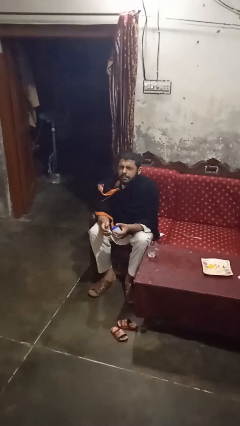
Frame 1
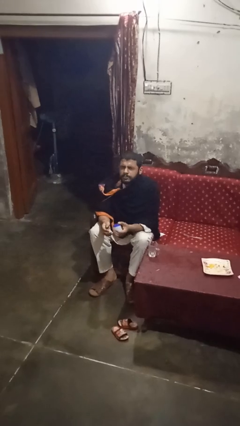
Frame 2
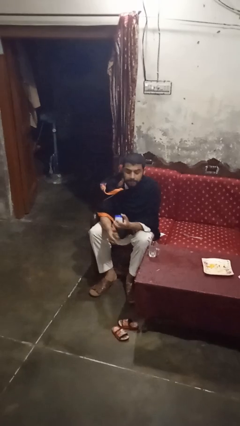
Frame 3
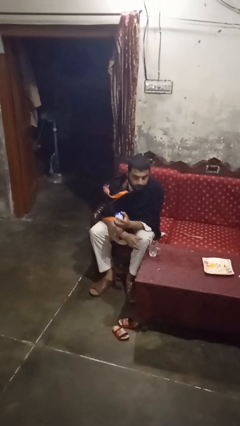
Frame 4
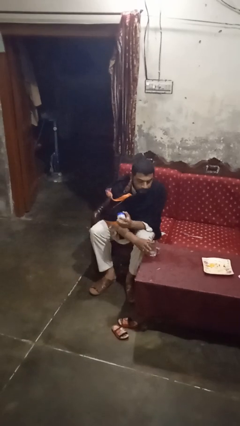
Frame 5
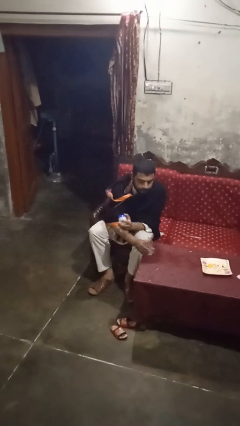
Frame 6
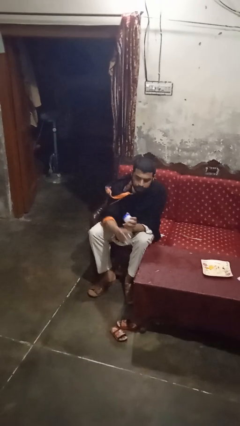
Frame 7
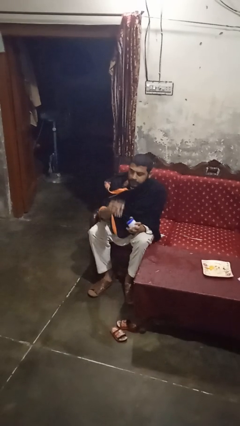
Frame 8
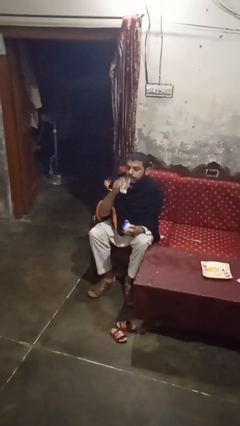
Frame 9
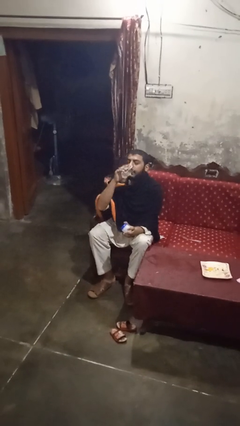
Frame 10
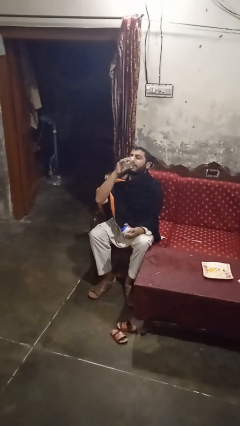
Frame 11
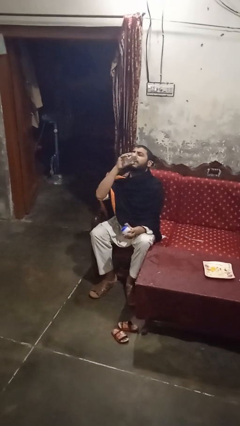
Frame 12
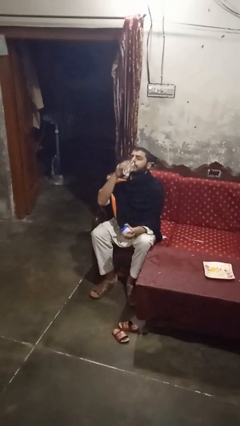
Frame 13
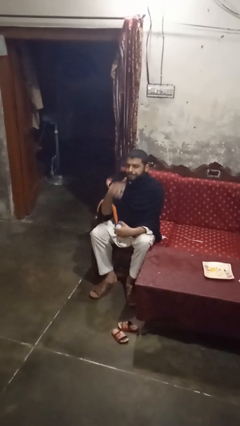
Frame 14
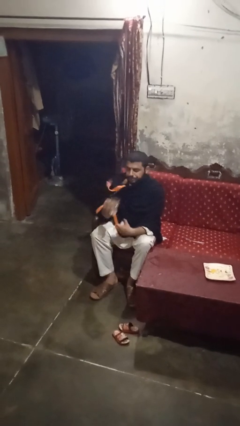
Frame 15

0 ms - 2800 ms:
person drinks from cup

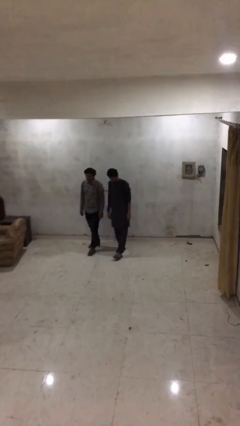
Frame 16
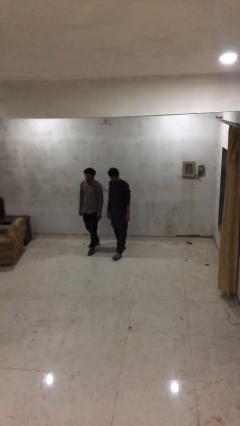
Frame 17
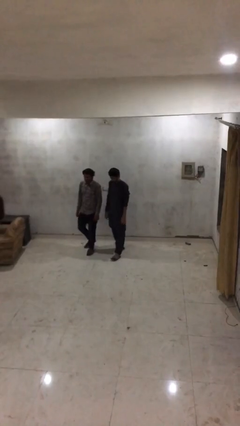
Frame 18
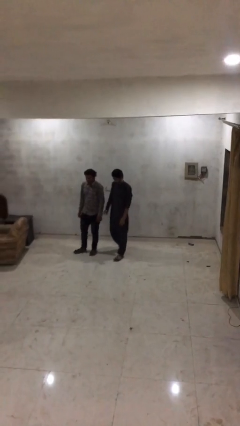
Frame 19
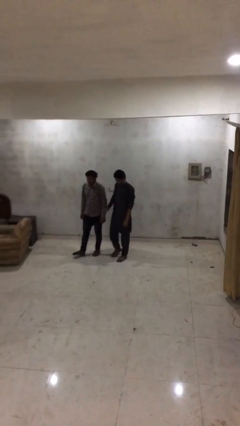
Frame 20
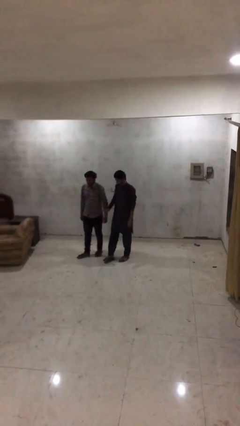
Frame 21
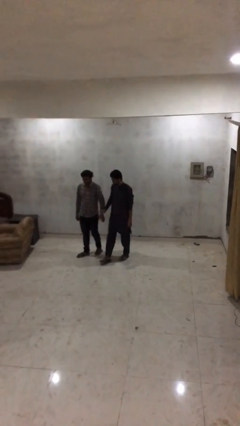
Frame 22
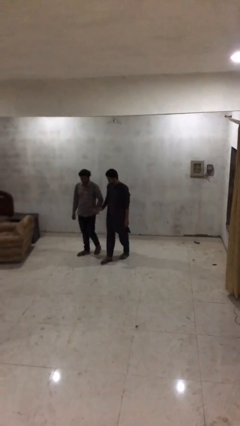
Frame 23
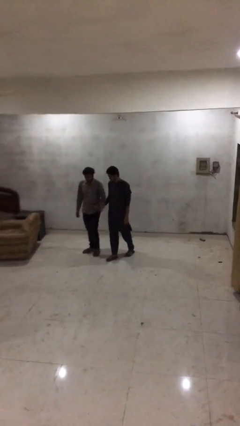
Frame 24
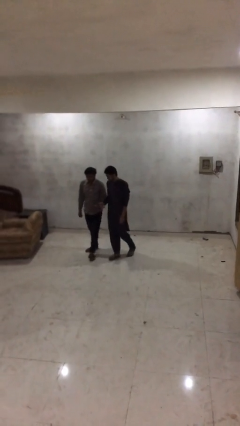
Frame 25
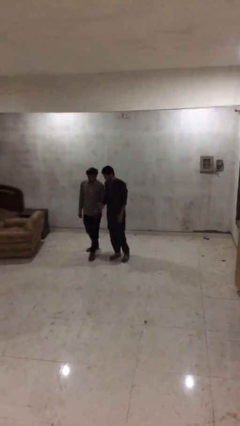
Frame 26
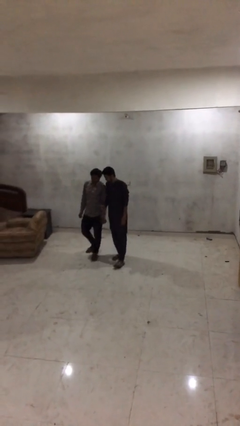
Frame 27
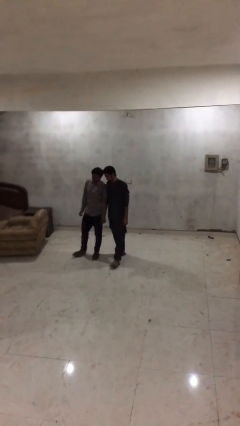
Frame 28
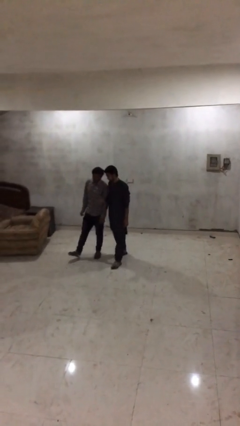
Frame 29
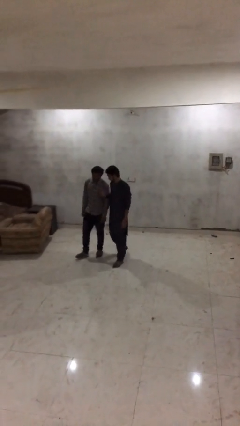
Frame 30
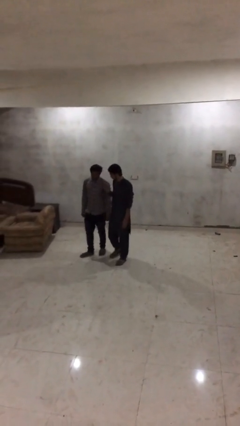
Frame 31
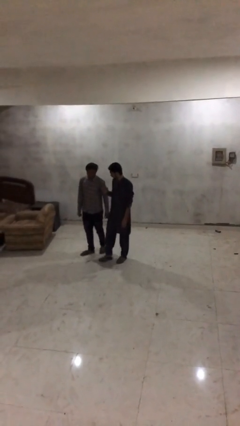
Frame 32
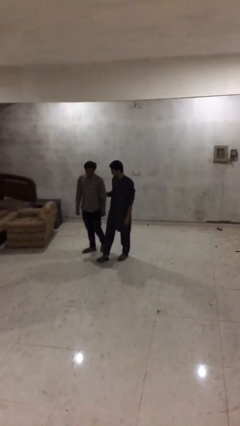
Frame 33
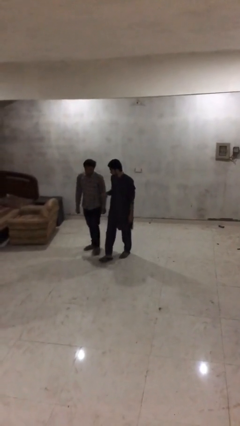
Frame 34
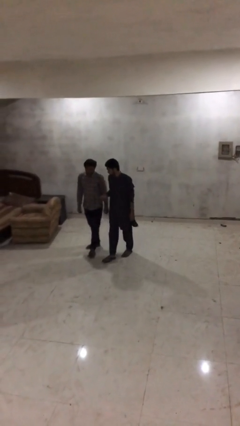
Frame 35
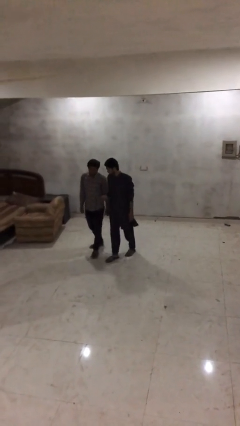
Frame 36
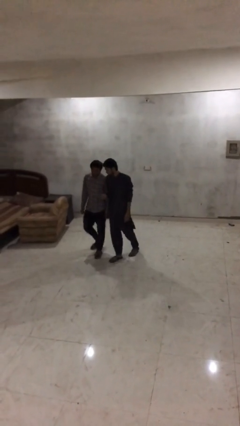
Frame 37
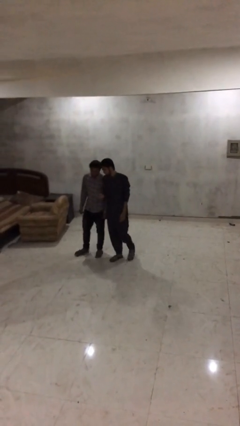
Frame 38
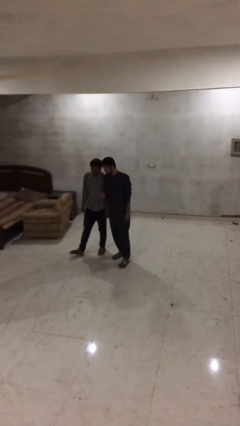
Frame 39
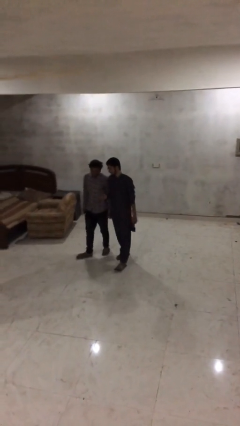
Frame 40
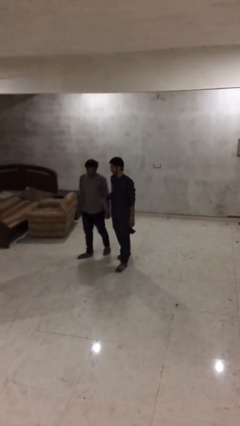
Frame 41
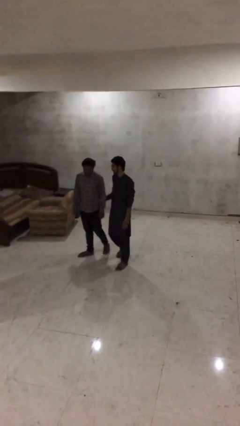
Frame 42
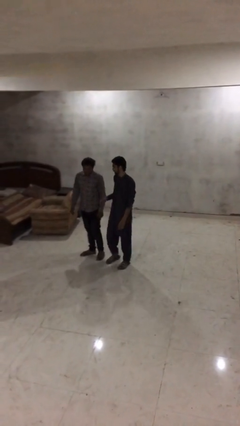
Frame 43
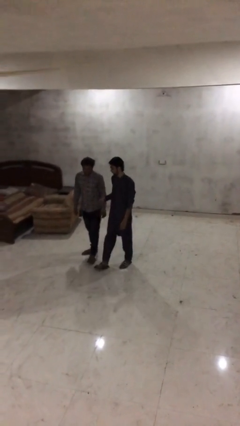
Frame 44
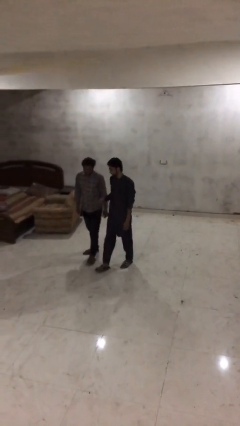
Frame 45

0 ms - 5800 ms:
person talks to person

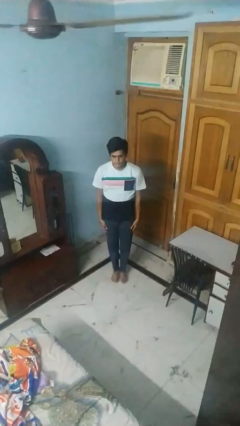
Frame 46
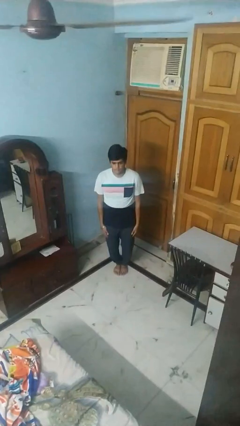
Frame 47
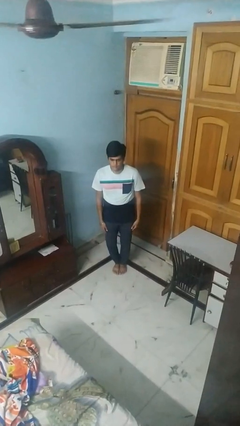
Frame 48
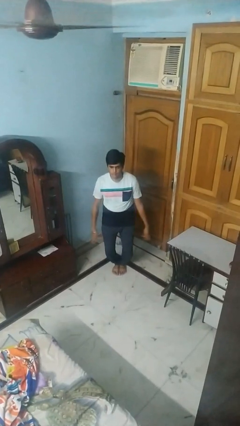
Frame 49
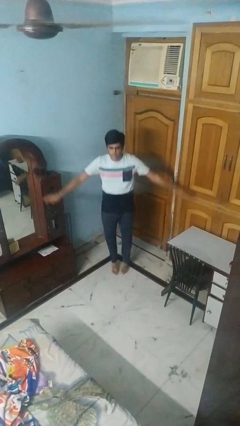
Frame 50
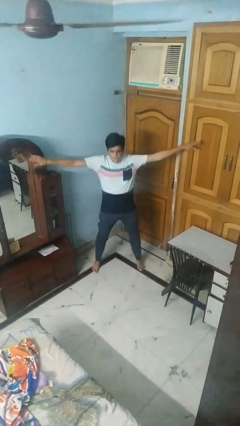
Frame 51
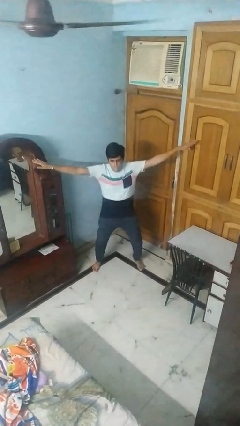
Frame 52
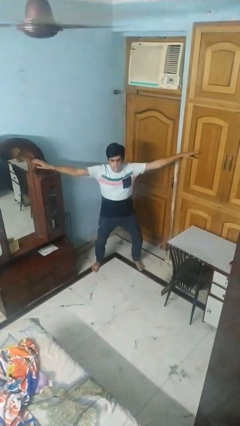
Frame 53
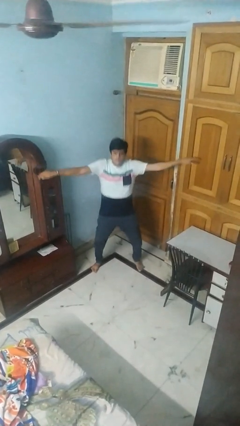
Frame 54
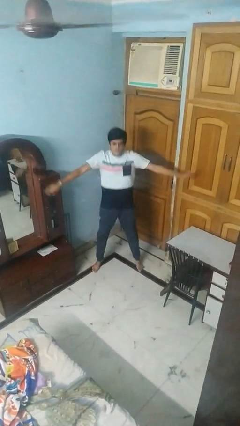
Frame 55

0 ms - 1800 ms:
person exercises with jumping jacks

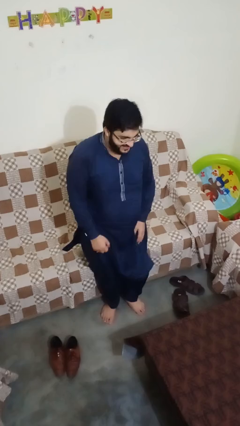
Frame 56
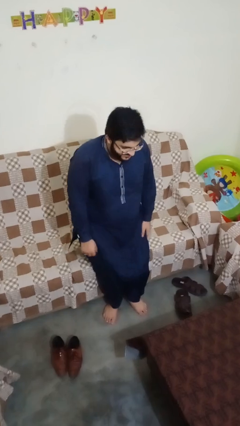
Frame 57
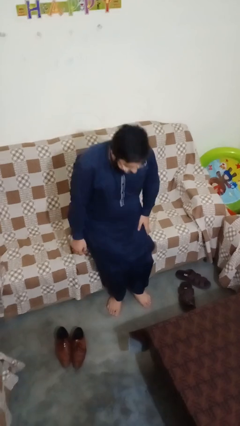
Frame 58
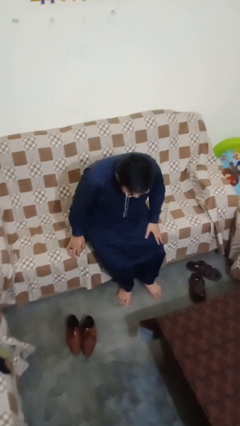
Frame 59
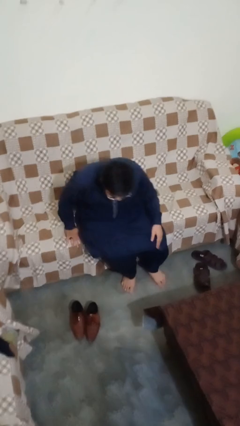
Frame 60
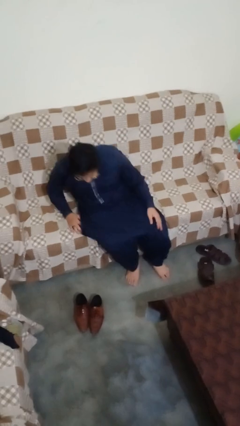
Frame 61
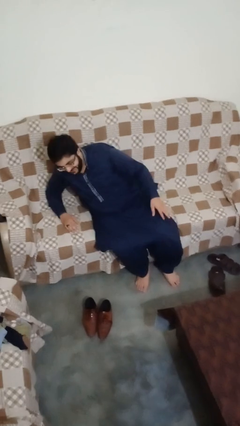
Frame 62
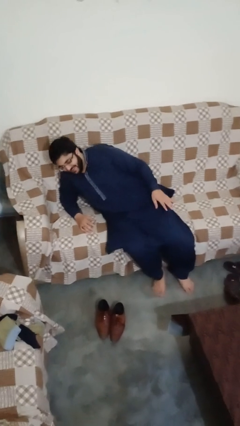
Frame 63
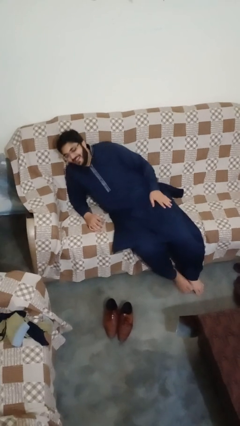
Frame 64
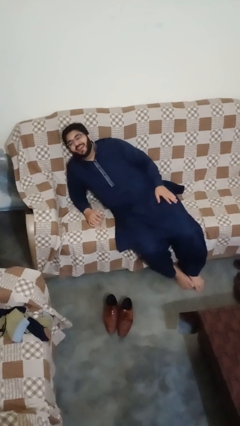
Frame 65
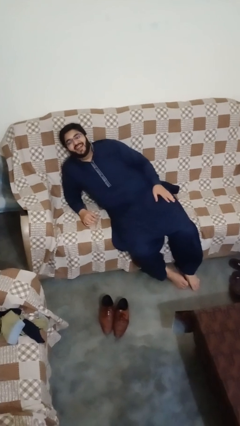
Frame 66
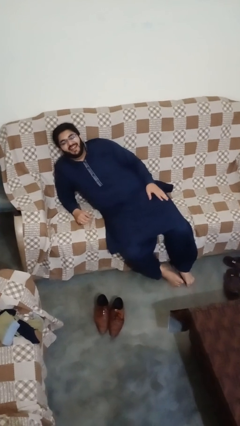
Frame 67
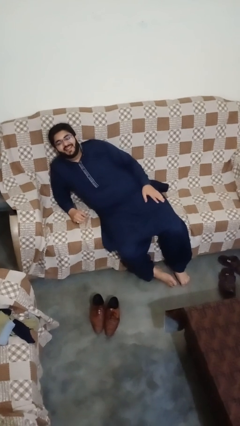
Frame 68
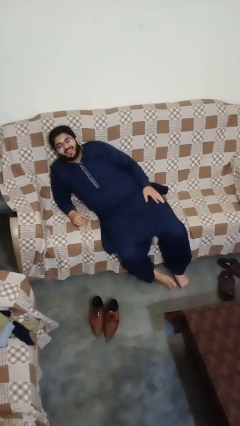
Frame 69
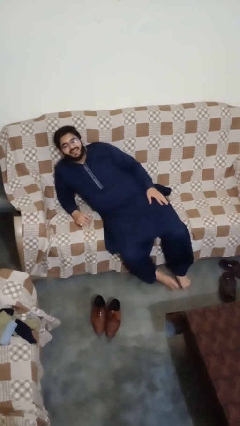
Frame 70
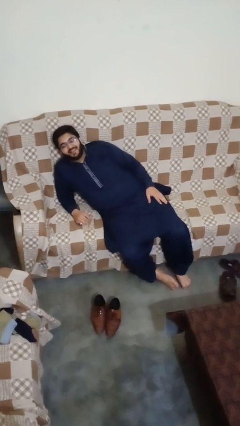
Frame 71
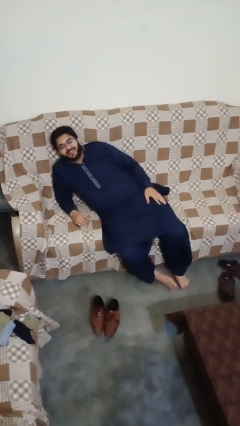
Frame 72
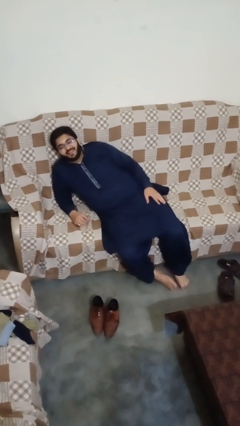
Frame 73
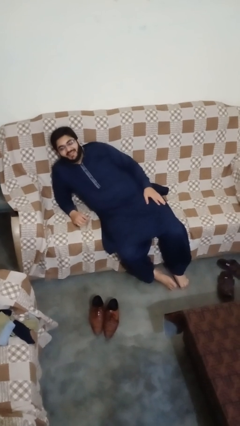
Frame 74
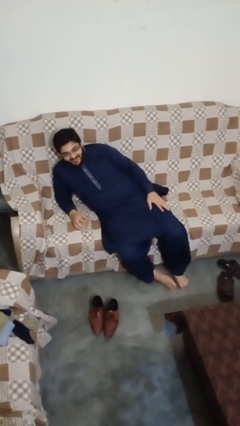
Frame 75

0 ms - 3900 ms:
person lies down on couch

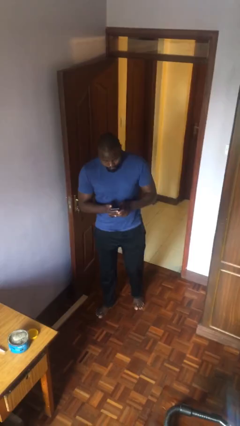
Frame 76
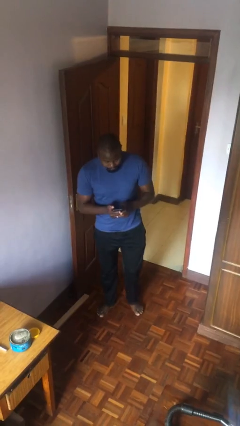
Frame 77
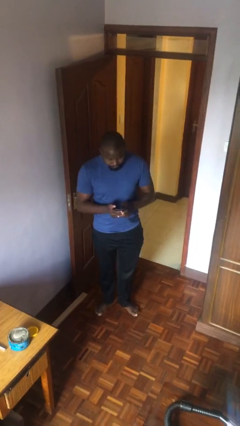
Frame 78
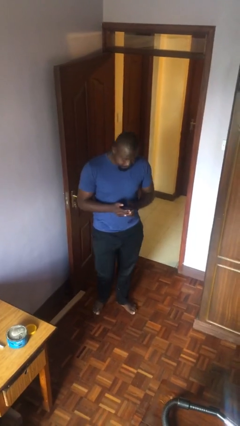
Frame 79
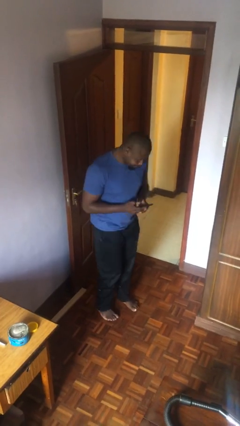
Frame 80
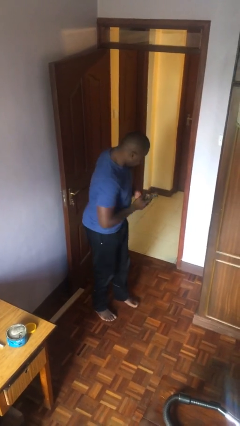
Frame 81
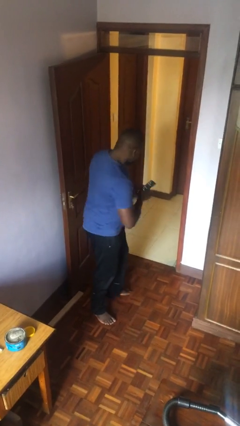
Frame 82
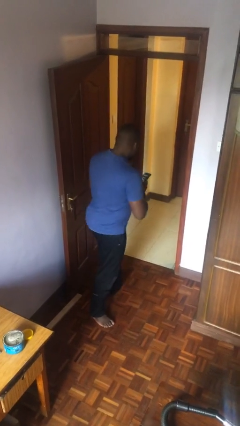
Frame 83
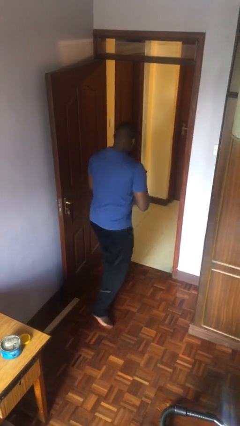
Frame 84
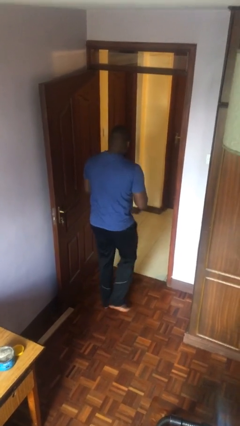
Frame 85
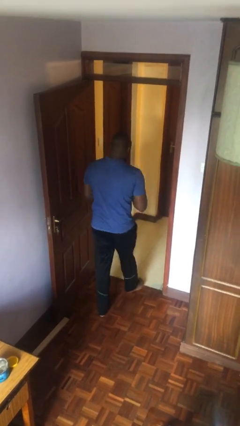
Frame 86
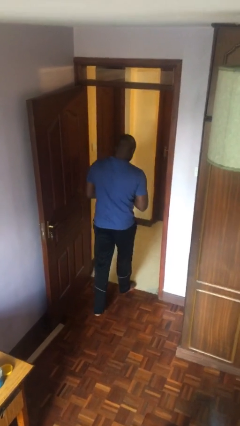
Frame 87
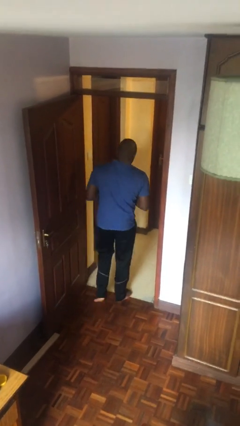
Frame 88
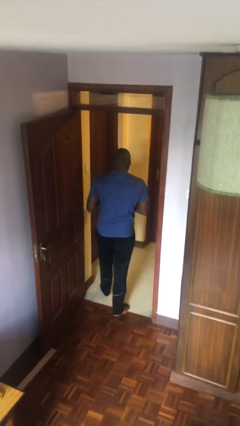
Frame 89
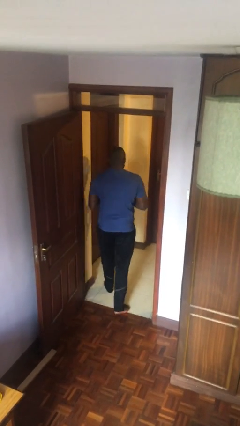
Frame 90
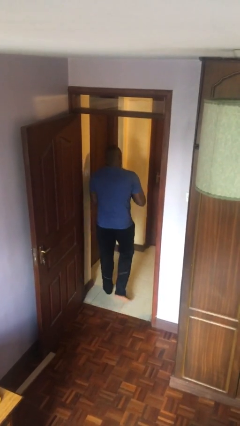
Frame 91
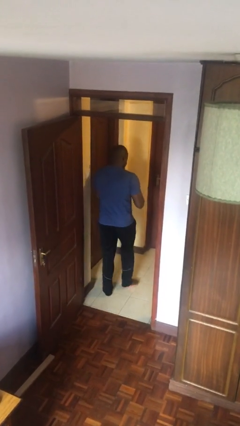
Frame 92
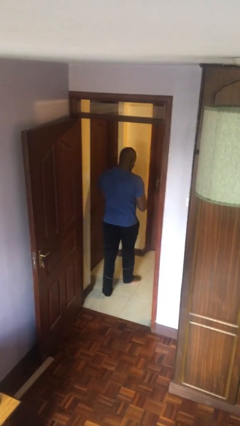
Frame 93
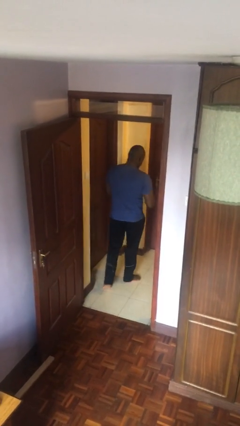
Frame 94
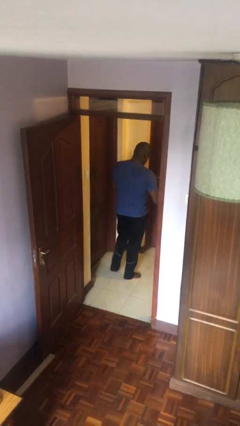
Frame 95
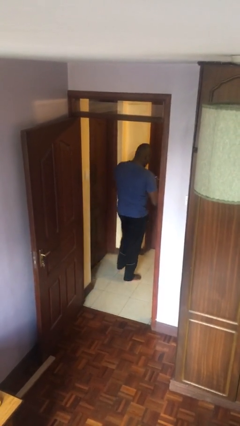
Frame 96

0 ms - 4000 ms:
person exits scene through structure
